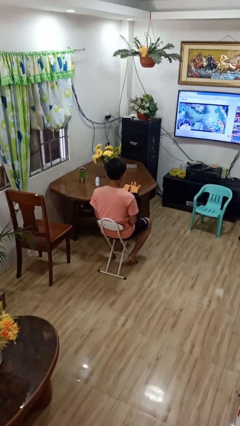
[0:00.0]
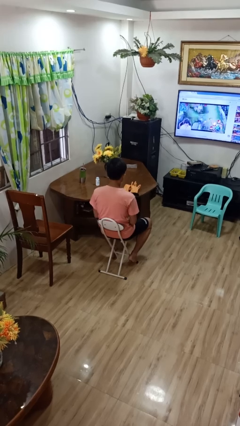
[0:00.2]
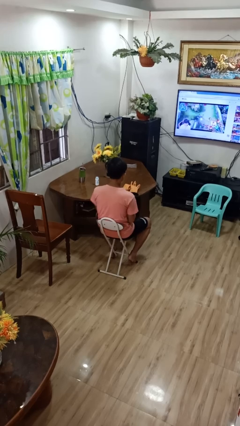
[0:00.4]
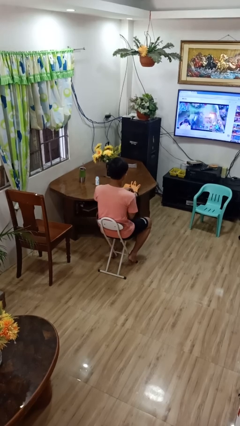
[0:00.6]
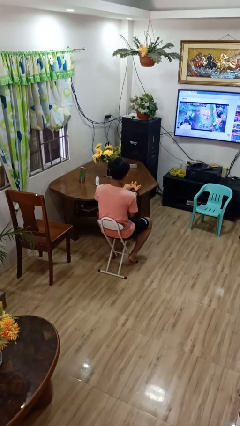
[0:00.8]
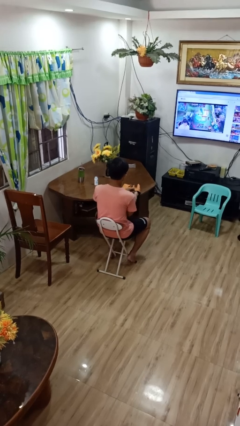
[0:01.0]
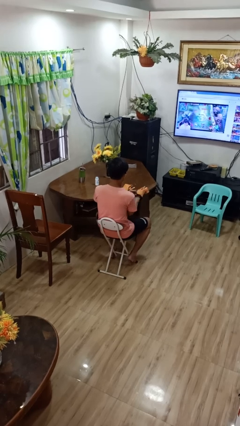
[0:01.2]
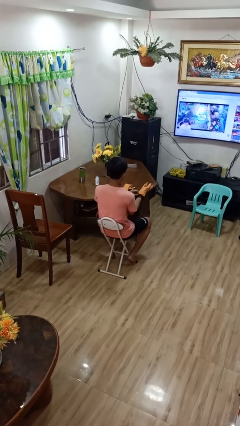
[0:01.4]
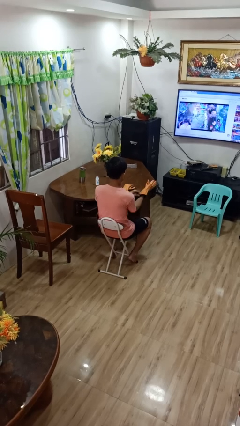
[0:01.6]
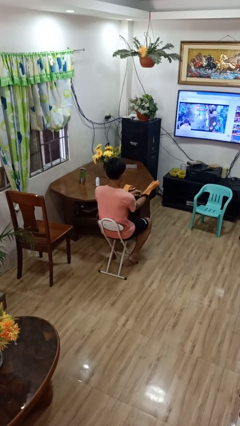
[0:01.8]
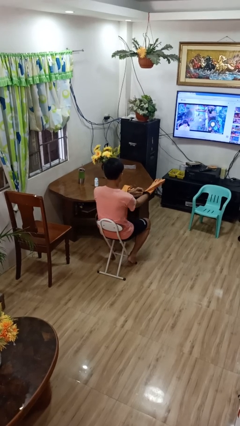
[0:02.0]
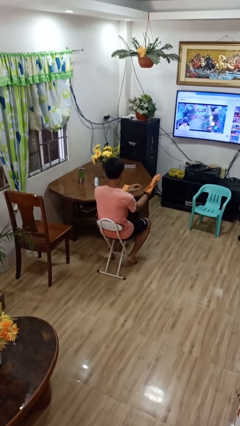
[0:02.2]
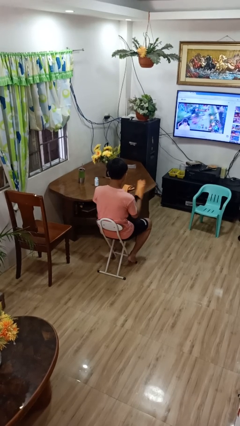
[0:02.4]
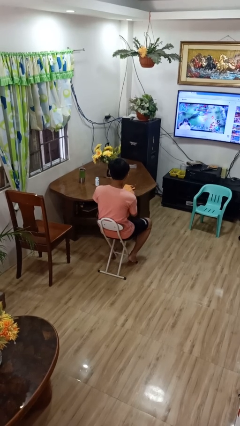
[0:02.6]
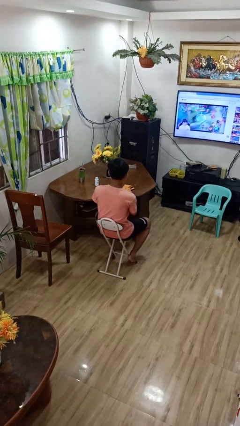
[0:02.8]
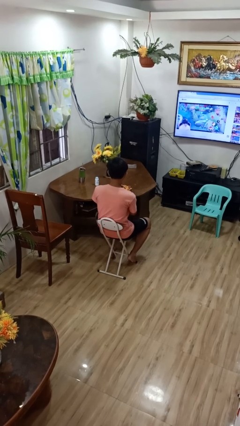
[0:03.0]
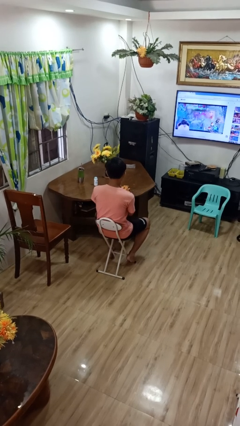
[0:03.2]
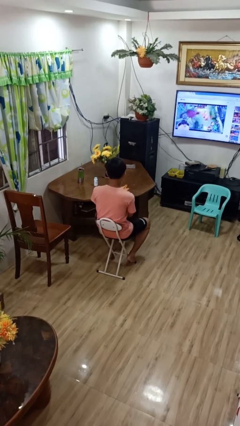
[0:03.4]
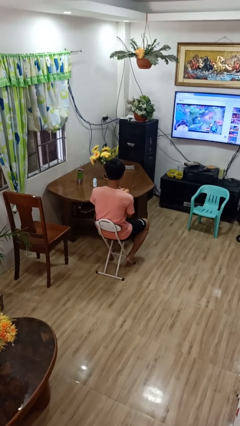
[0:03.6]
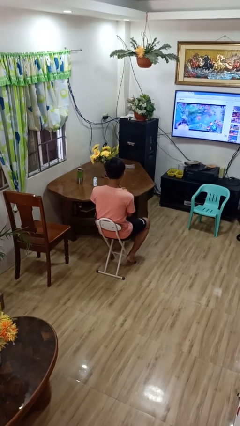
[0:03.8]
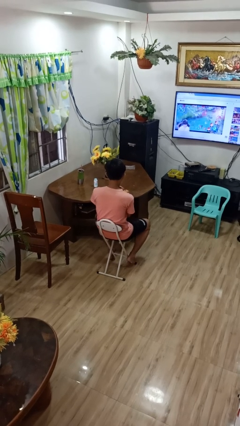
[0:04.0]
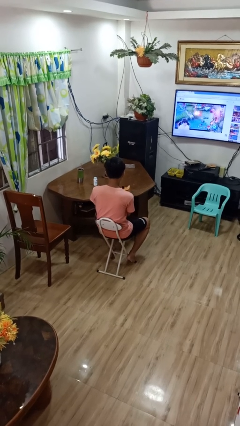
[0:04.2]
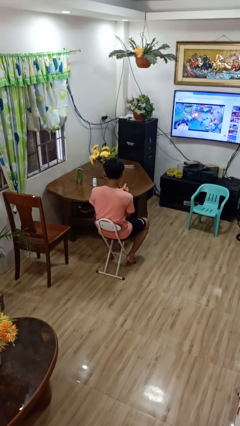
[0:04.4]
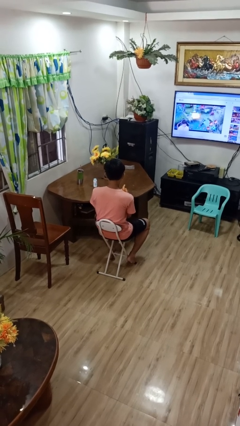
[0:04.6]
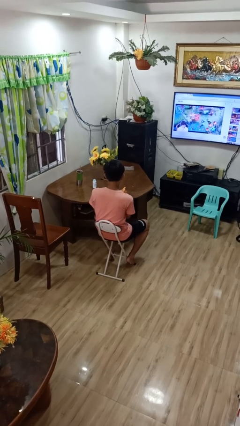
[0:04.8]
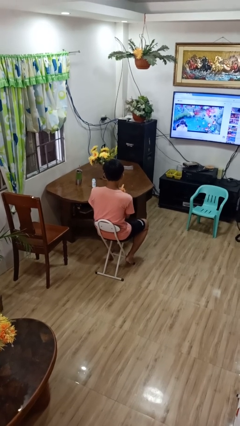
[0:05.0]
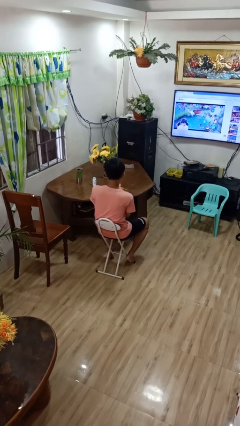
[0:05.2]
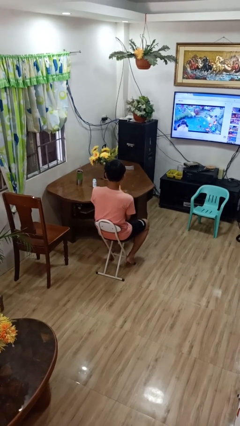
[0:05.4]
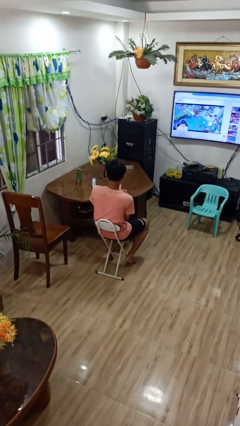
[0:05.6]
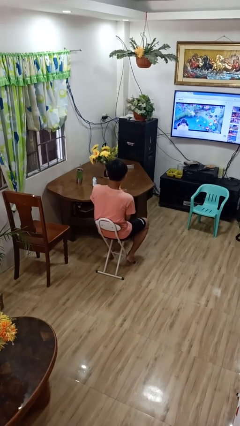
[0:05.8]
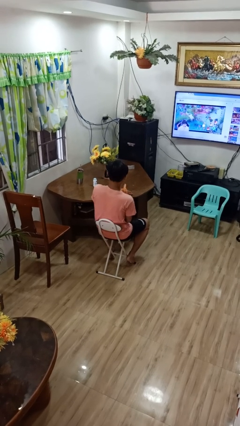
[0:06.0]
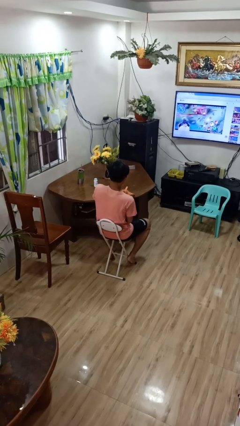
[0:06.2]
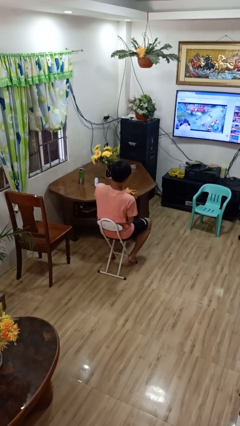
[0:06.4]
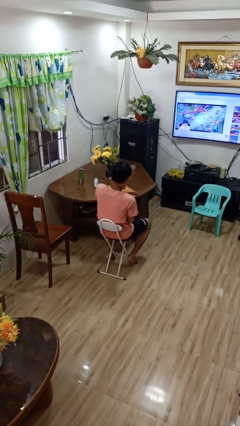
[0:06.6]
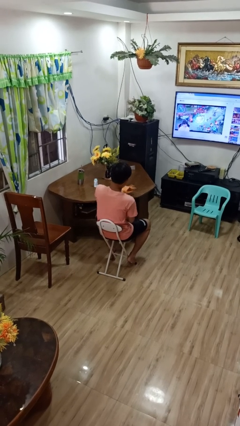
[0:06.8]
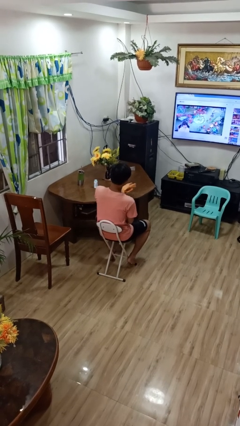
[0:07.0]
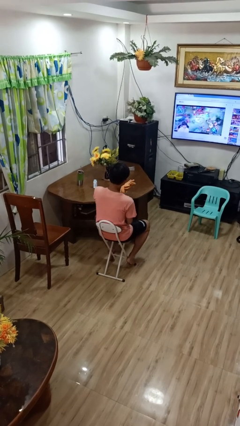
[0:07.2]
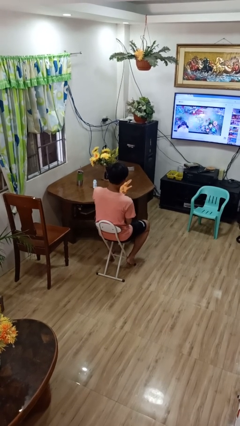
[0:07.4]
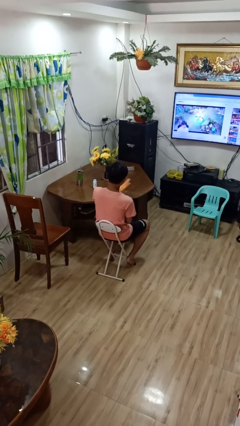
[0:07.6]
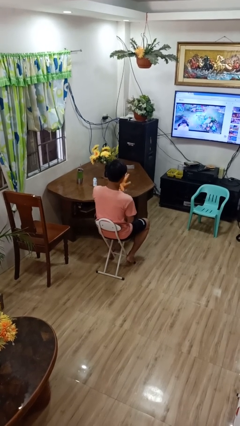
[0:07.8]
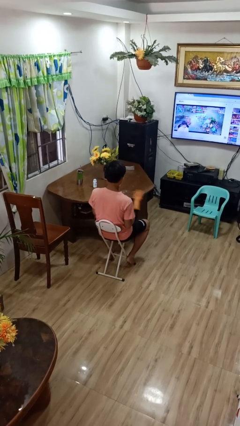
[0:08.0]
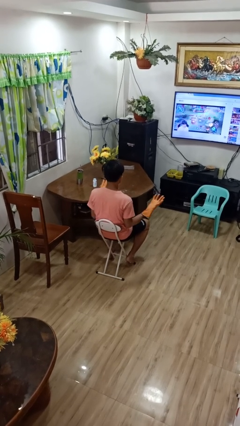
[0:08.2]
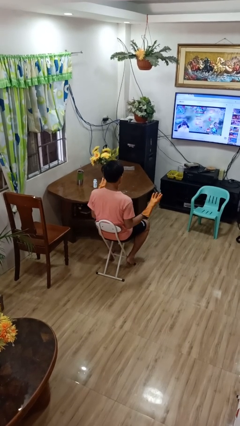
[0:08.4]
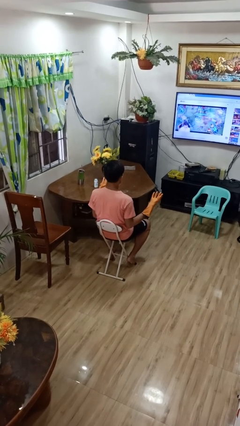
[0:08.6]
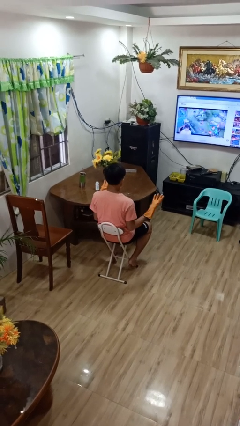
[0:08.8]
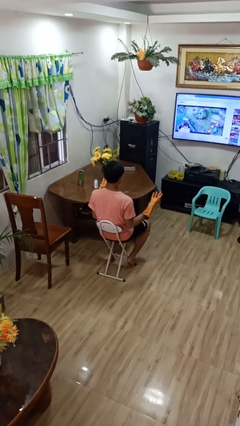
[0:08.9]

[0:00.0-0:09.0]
person puts on gloves

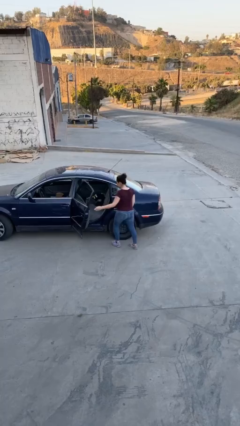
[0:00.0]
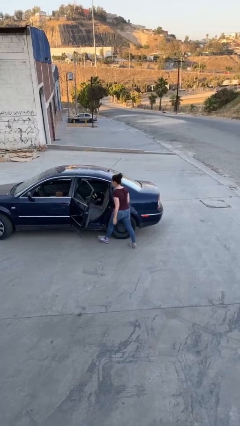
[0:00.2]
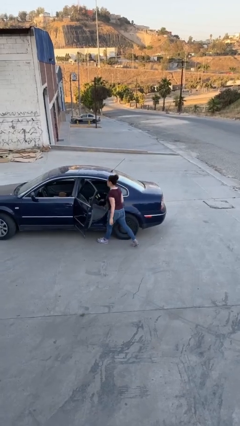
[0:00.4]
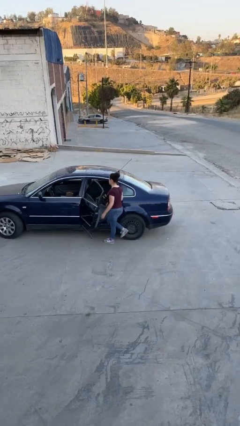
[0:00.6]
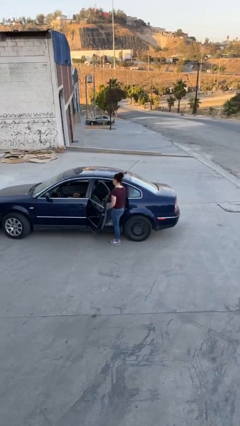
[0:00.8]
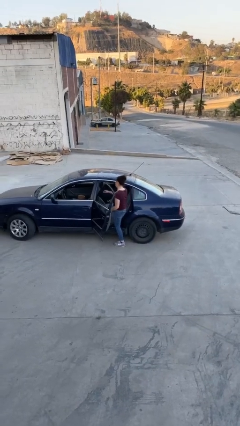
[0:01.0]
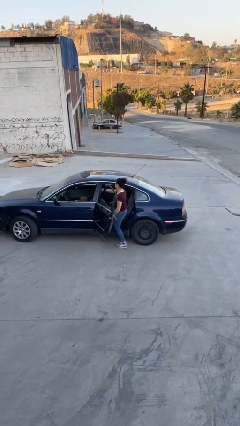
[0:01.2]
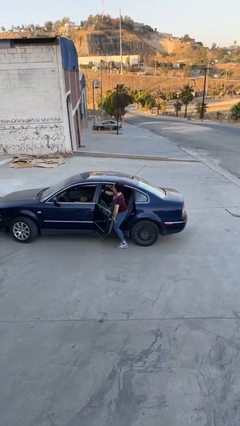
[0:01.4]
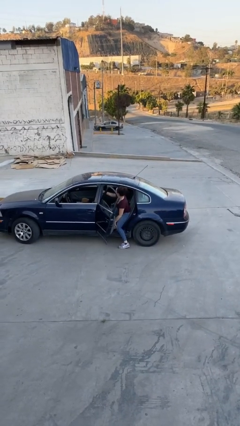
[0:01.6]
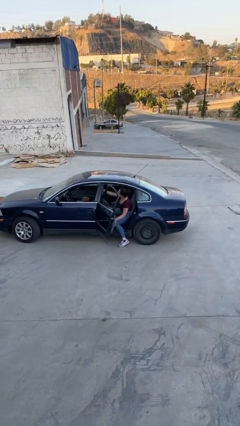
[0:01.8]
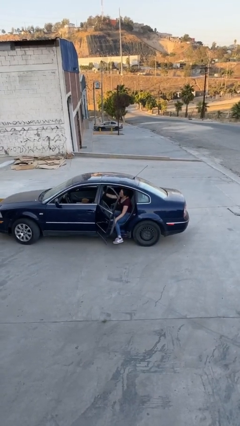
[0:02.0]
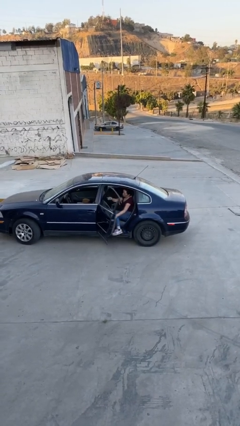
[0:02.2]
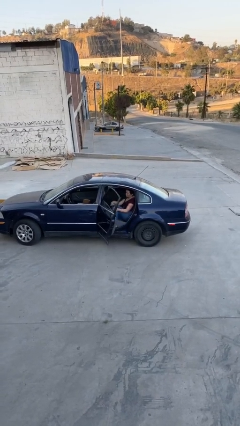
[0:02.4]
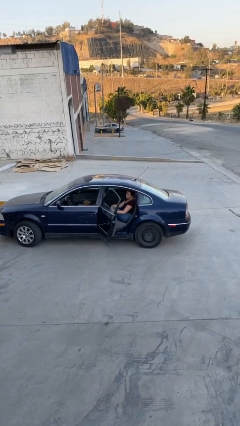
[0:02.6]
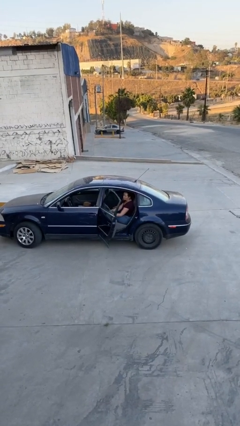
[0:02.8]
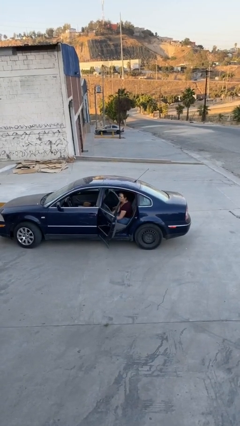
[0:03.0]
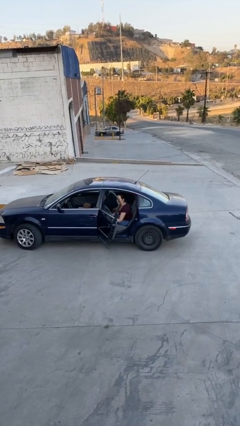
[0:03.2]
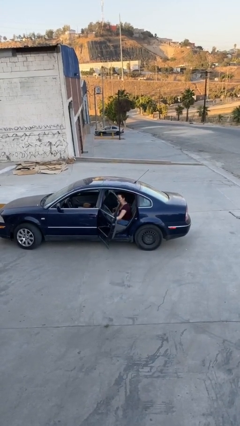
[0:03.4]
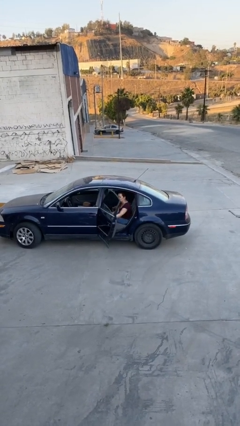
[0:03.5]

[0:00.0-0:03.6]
person enters car

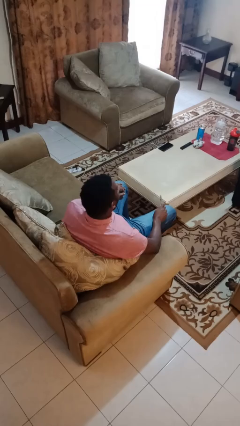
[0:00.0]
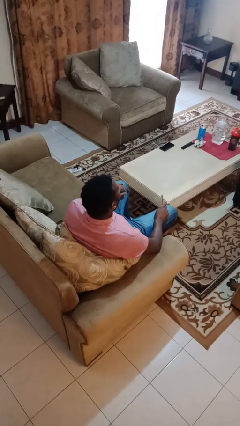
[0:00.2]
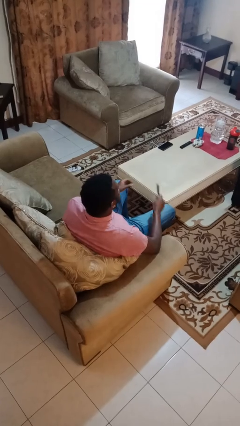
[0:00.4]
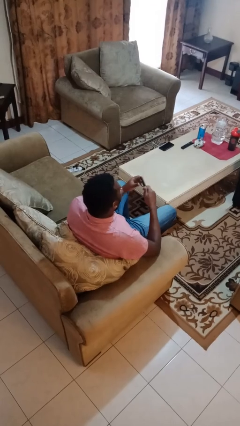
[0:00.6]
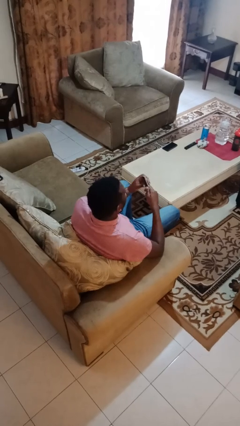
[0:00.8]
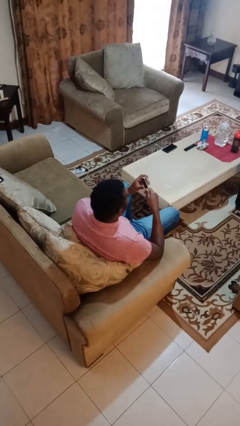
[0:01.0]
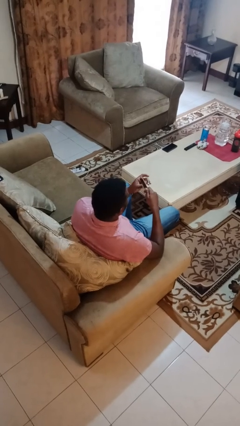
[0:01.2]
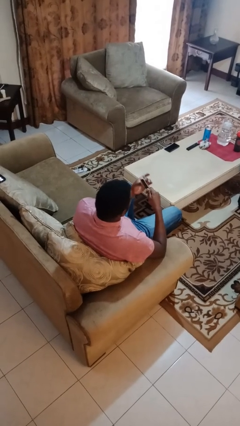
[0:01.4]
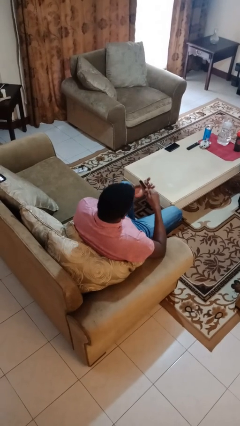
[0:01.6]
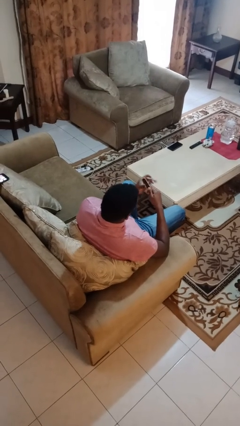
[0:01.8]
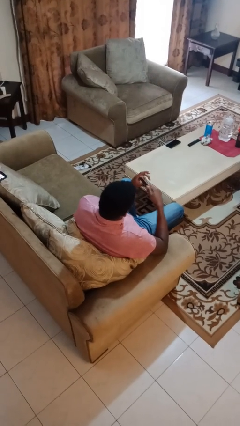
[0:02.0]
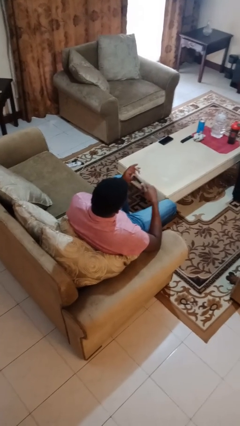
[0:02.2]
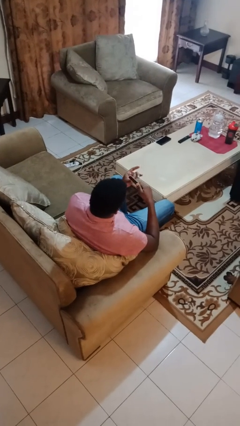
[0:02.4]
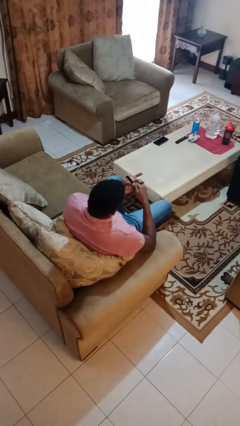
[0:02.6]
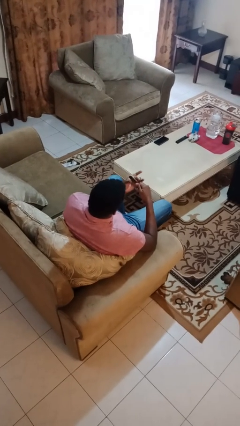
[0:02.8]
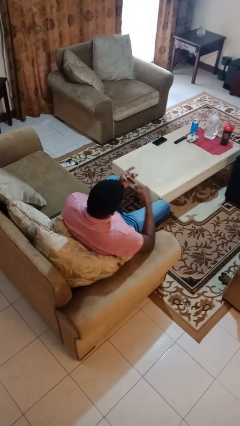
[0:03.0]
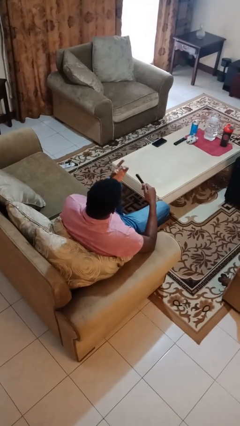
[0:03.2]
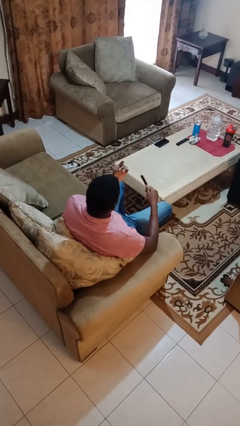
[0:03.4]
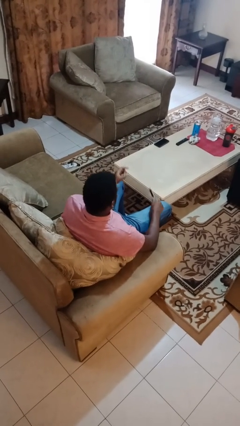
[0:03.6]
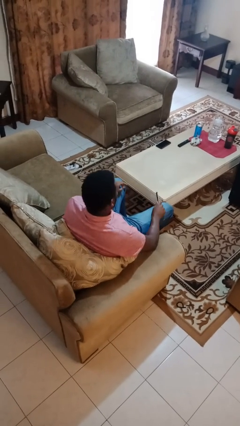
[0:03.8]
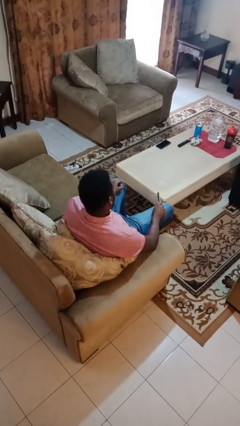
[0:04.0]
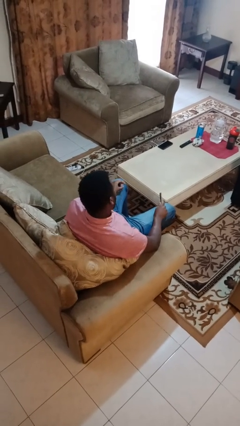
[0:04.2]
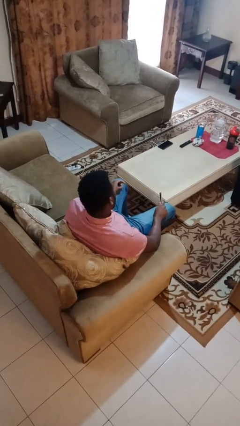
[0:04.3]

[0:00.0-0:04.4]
person files fingernails

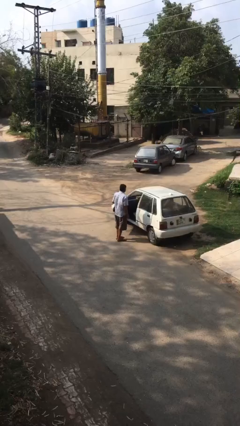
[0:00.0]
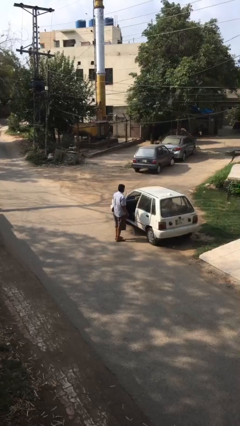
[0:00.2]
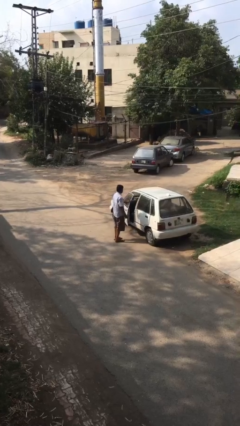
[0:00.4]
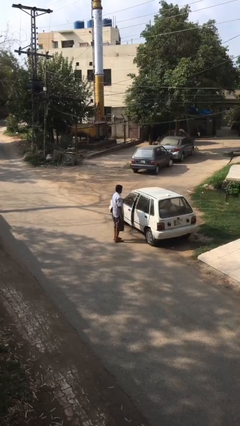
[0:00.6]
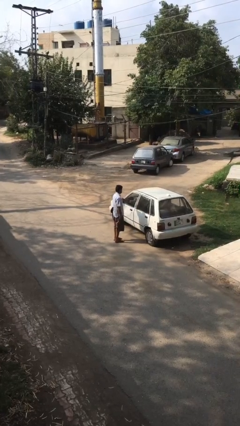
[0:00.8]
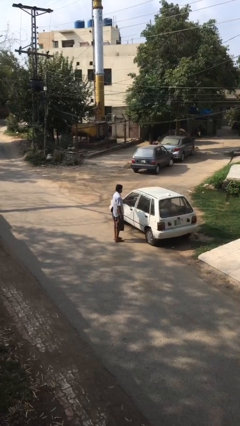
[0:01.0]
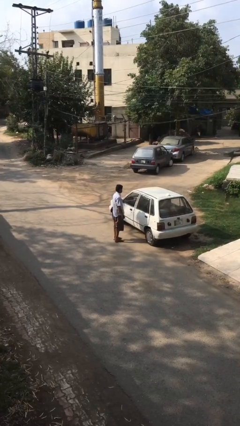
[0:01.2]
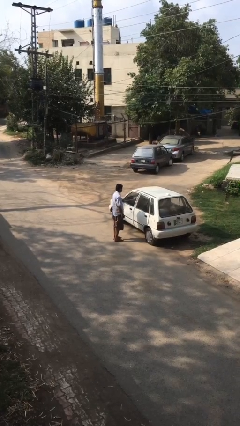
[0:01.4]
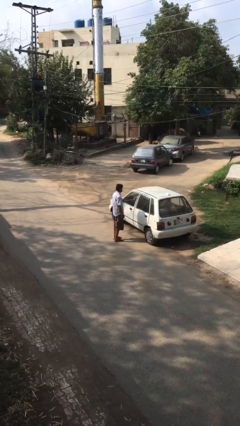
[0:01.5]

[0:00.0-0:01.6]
person closes car door
